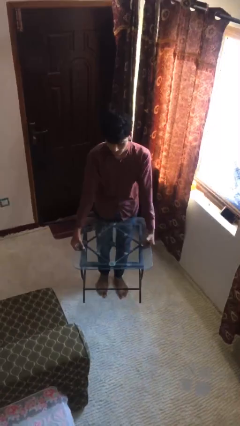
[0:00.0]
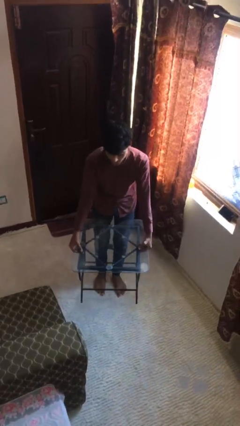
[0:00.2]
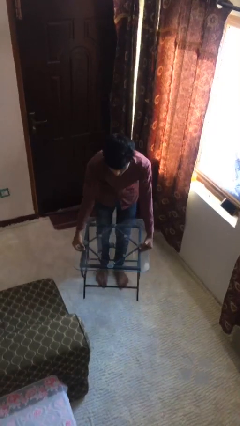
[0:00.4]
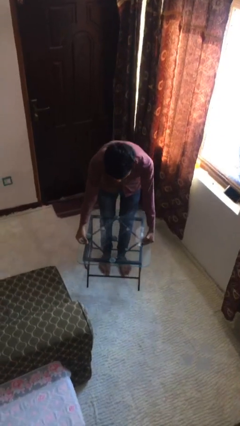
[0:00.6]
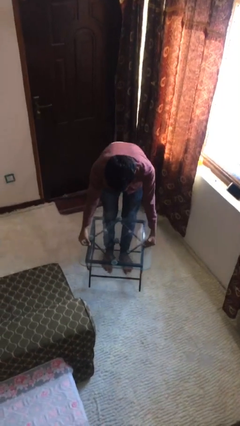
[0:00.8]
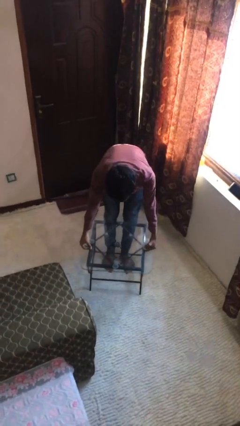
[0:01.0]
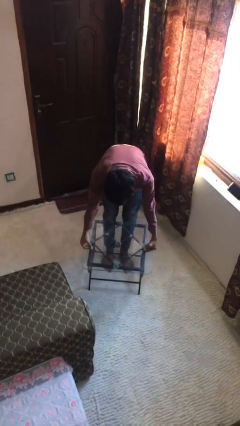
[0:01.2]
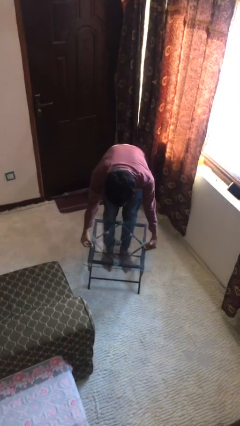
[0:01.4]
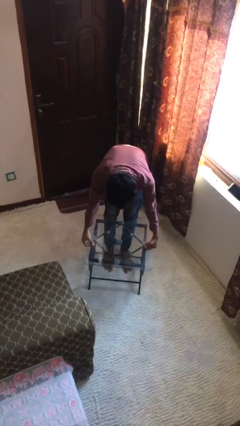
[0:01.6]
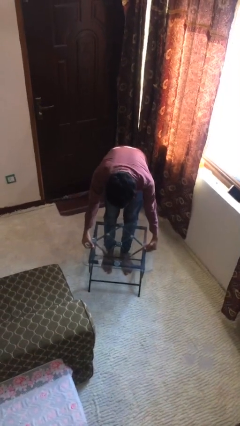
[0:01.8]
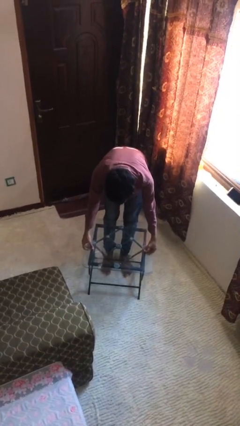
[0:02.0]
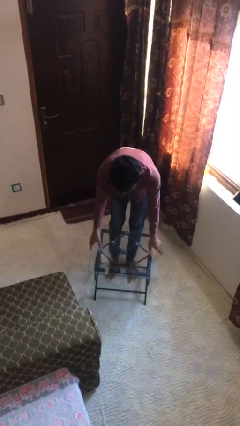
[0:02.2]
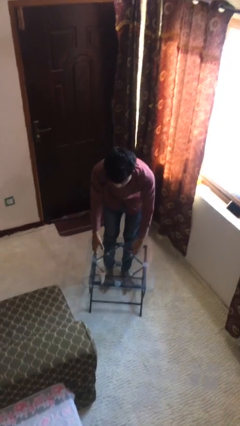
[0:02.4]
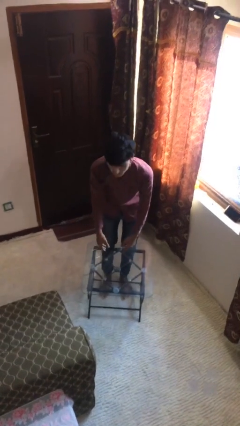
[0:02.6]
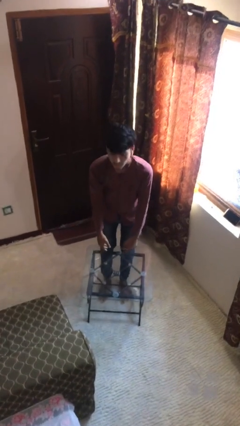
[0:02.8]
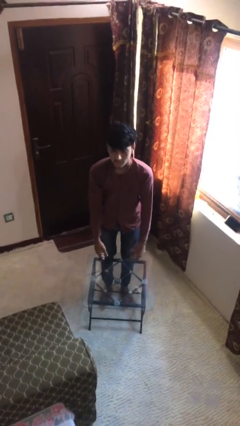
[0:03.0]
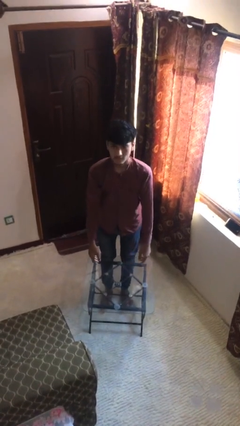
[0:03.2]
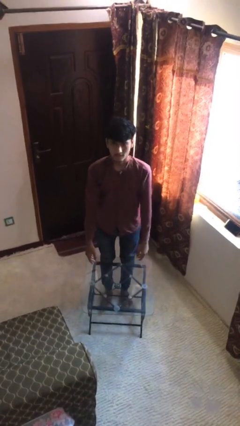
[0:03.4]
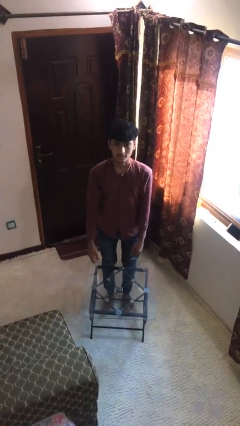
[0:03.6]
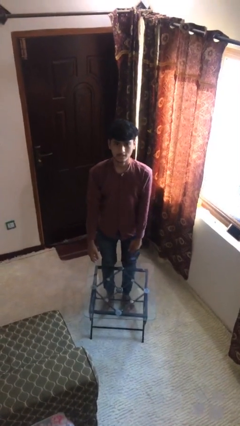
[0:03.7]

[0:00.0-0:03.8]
person puts down object on floor

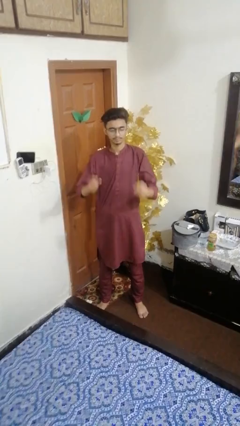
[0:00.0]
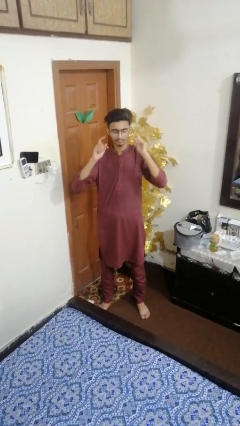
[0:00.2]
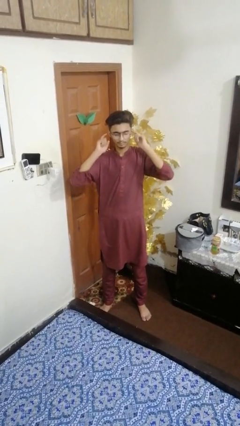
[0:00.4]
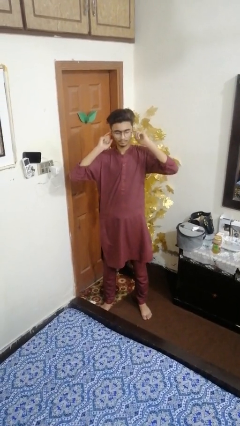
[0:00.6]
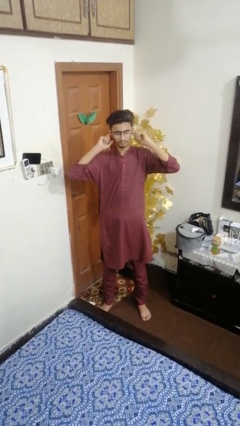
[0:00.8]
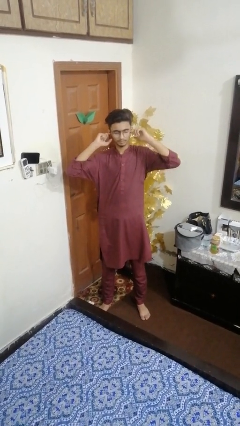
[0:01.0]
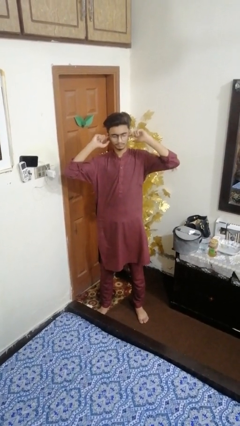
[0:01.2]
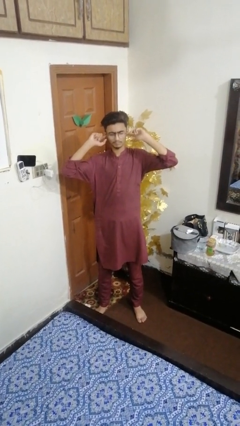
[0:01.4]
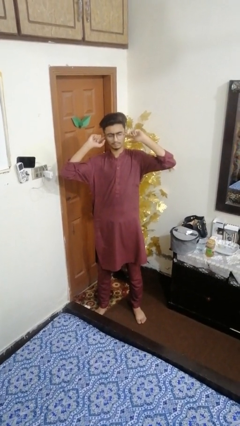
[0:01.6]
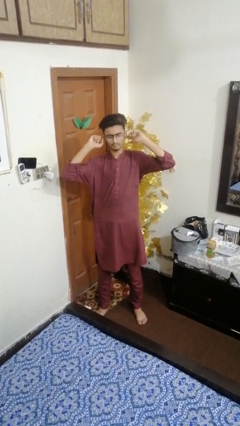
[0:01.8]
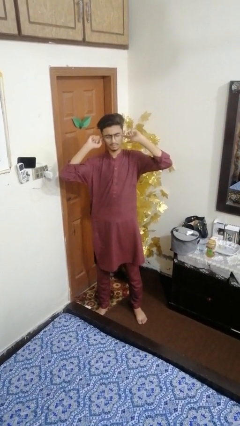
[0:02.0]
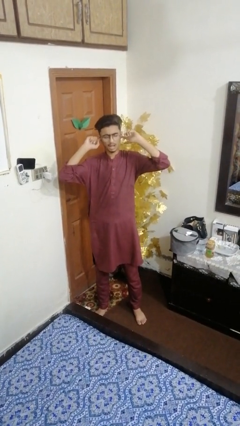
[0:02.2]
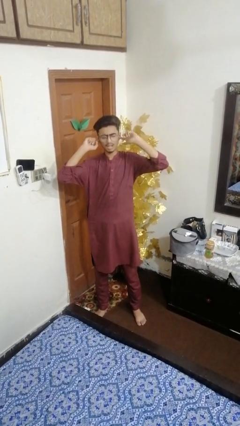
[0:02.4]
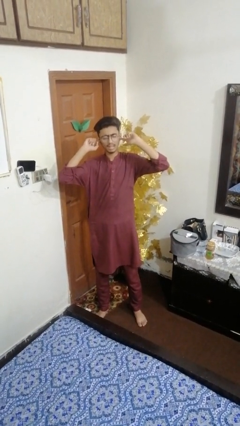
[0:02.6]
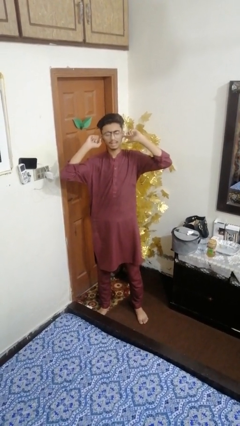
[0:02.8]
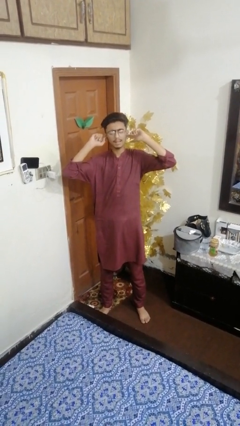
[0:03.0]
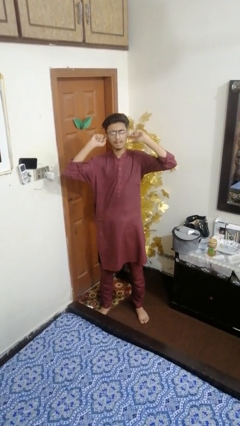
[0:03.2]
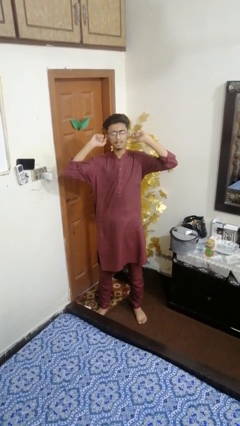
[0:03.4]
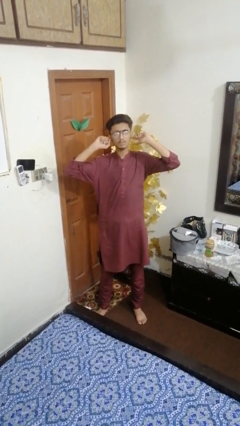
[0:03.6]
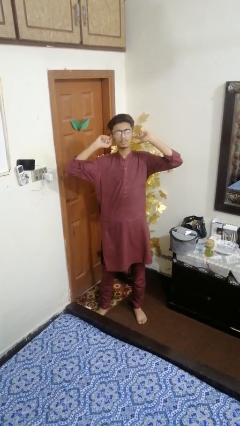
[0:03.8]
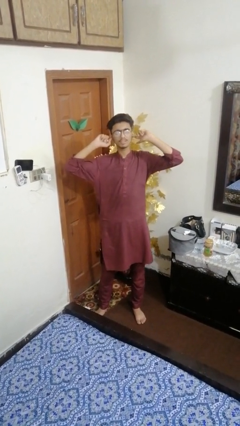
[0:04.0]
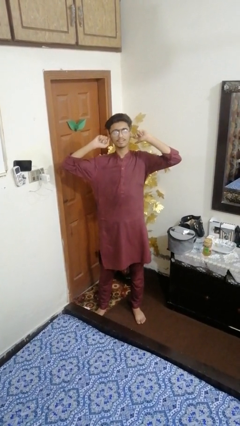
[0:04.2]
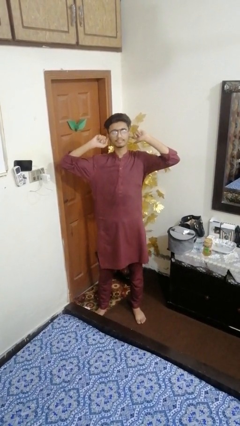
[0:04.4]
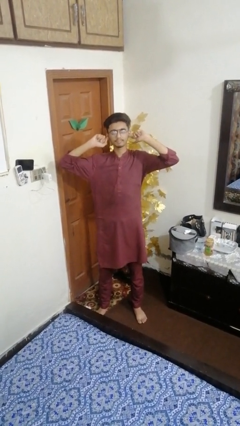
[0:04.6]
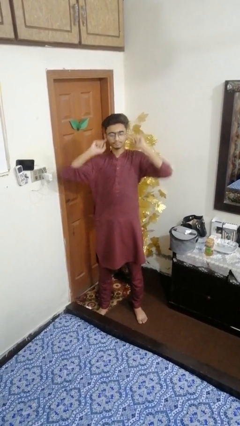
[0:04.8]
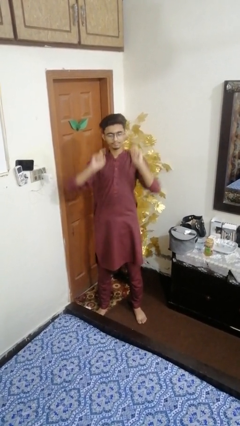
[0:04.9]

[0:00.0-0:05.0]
person puts fingers in ear

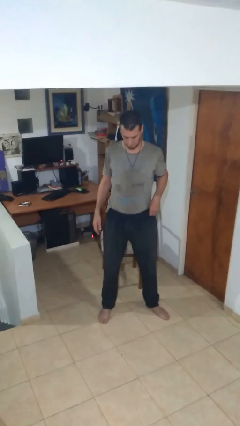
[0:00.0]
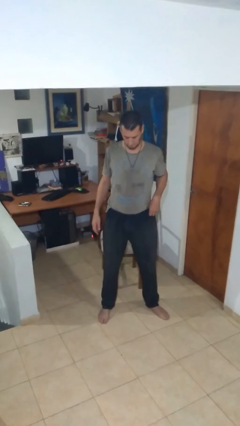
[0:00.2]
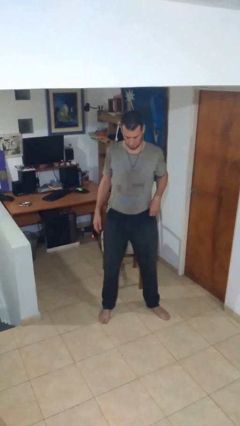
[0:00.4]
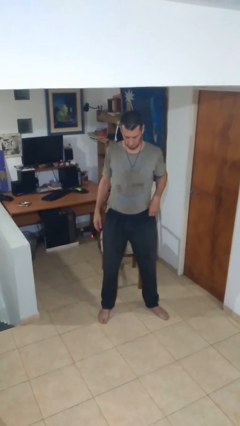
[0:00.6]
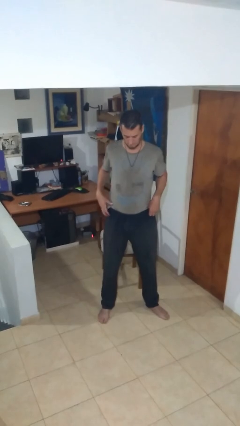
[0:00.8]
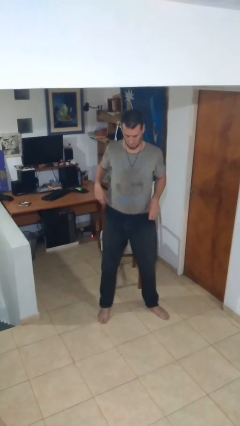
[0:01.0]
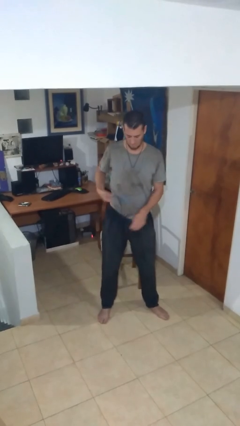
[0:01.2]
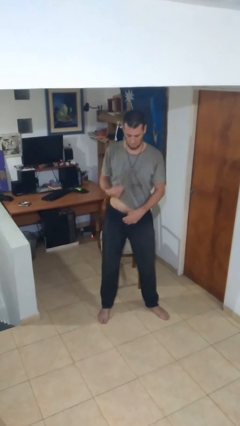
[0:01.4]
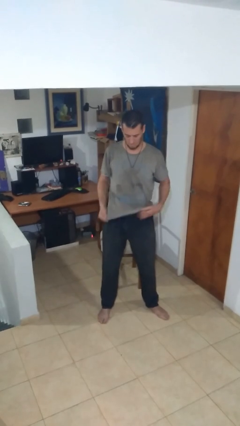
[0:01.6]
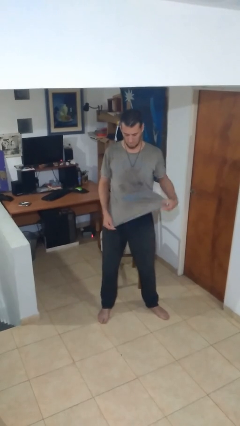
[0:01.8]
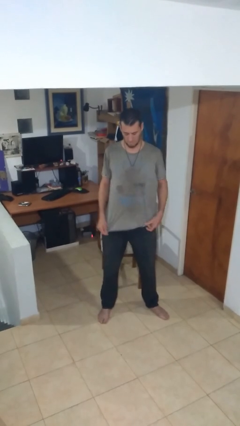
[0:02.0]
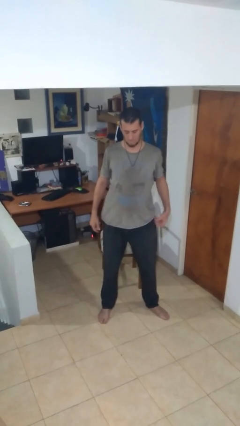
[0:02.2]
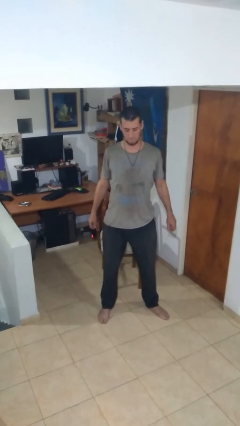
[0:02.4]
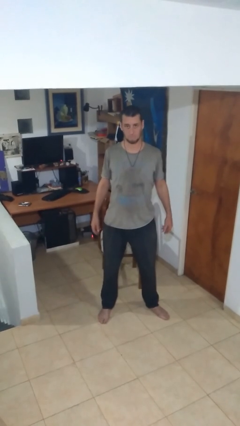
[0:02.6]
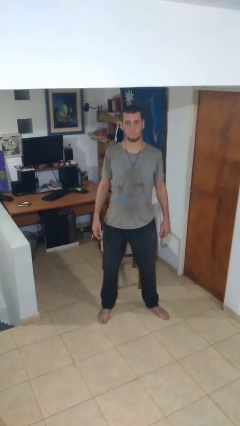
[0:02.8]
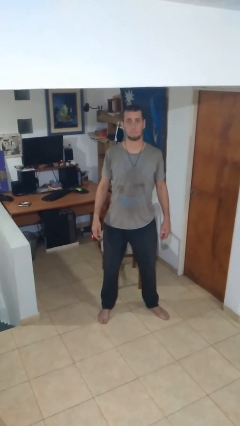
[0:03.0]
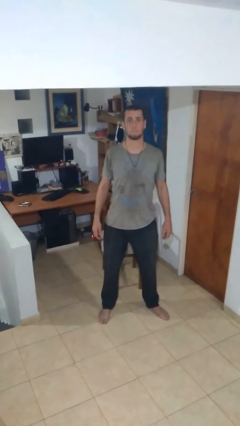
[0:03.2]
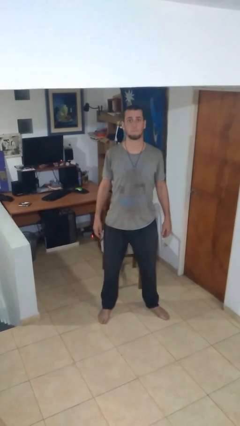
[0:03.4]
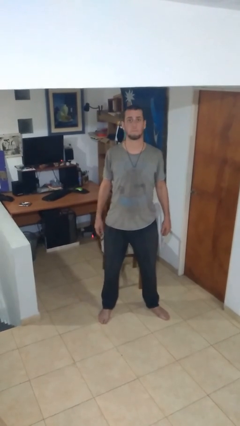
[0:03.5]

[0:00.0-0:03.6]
person untucks shirt

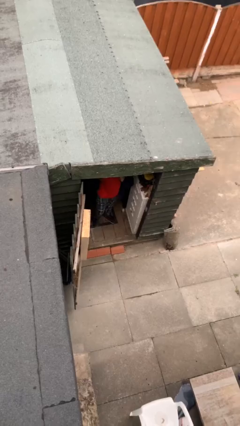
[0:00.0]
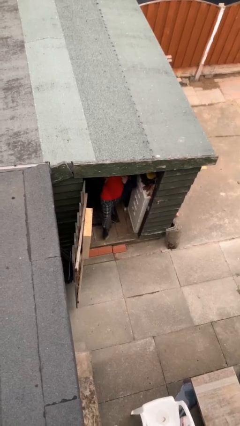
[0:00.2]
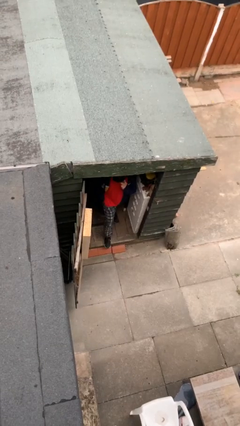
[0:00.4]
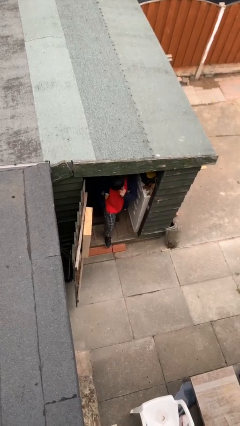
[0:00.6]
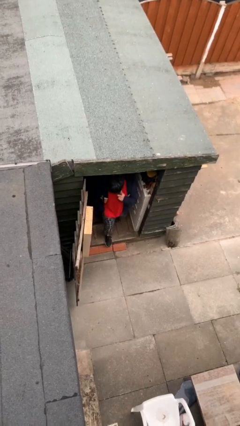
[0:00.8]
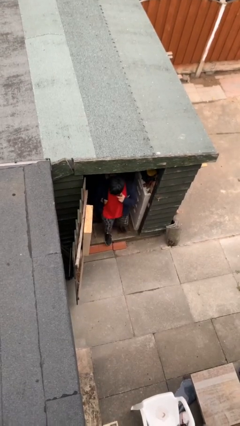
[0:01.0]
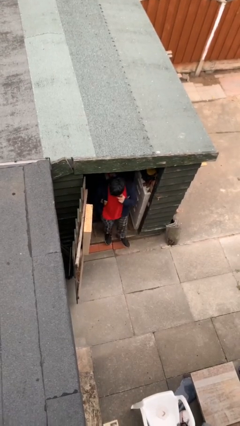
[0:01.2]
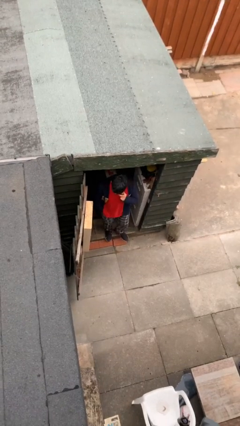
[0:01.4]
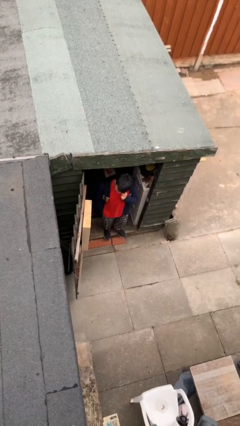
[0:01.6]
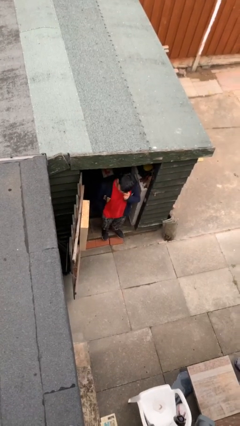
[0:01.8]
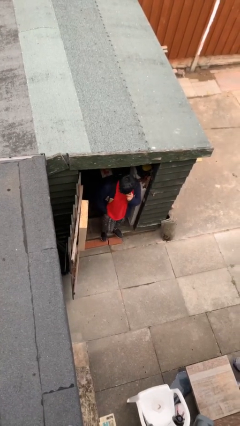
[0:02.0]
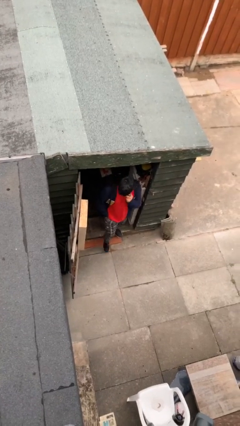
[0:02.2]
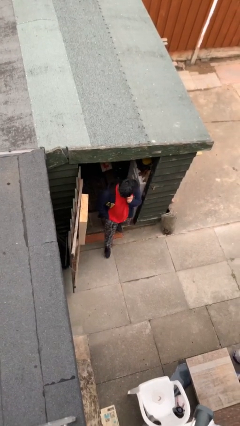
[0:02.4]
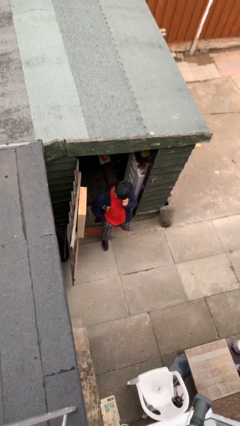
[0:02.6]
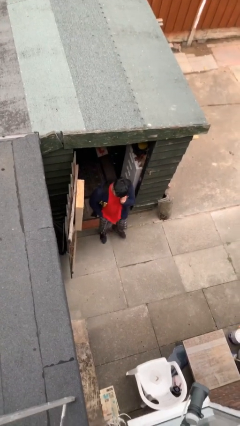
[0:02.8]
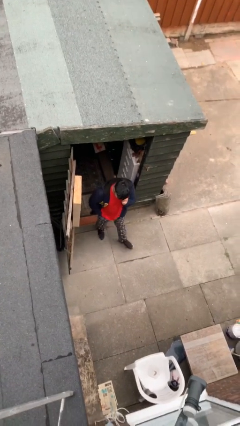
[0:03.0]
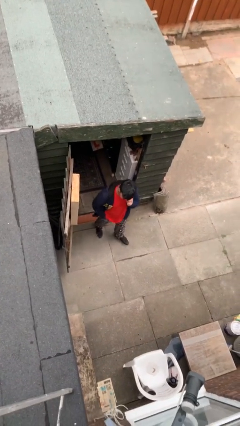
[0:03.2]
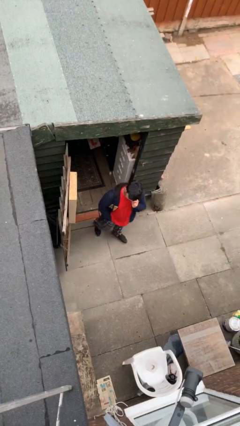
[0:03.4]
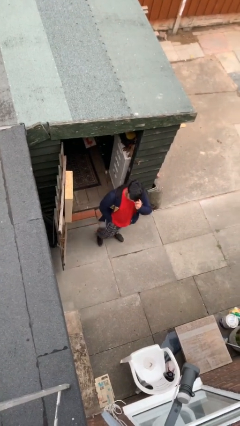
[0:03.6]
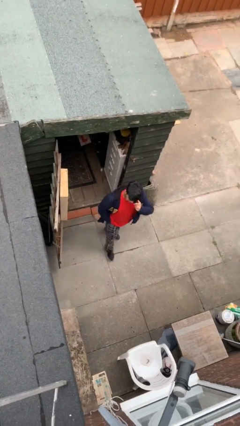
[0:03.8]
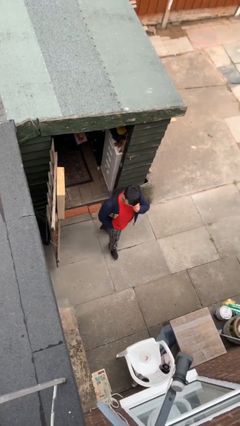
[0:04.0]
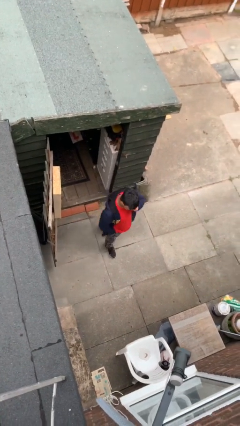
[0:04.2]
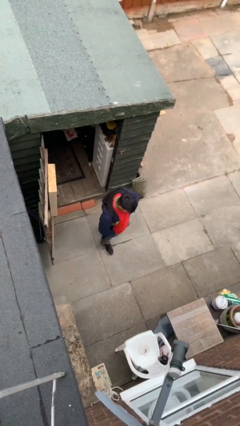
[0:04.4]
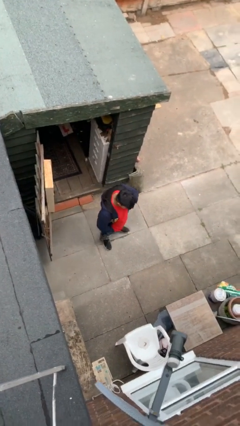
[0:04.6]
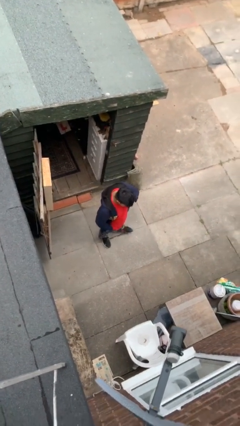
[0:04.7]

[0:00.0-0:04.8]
person enters scene through structure

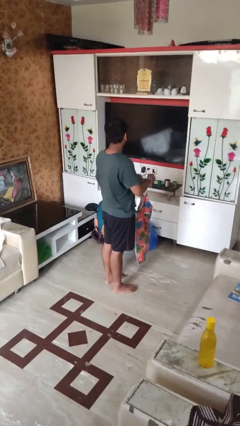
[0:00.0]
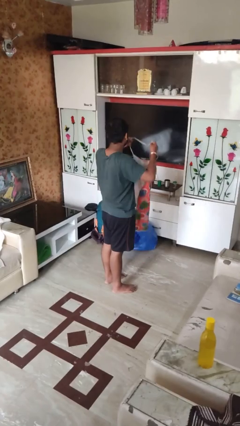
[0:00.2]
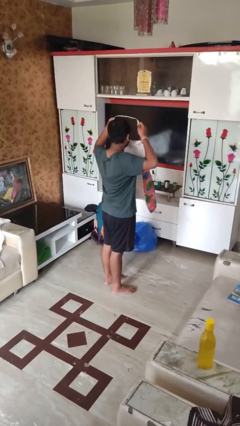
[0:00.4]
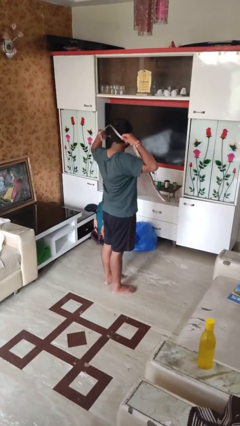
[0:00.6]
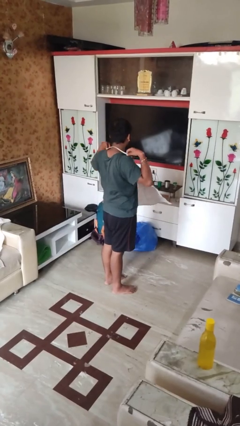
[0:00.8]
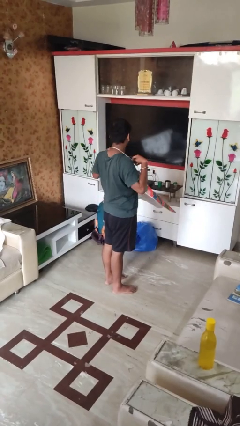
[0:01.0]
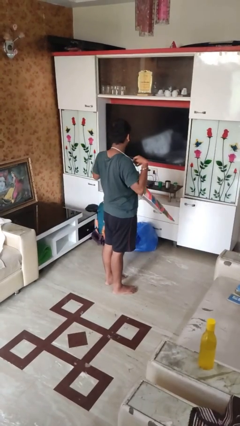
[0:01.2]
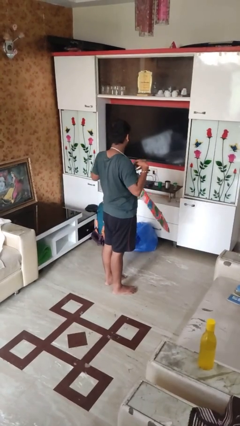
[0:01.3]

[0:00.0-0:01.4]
person puts on apron
